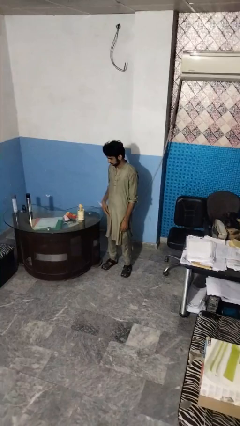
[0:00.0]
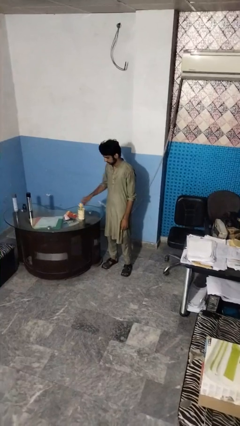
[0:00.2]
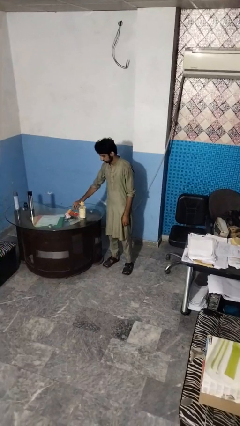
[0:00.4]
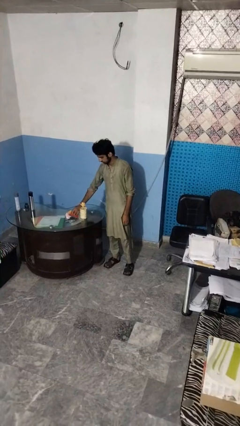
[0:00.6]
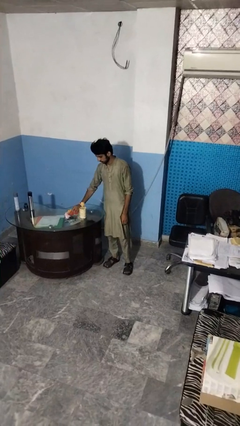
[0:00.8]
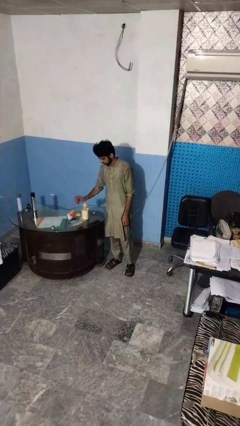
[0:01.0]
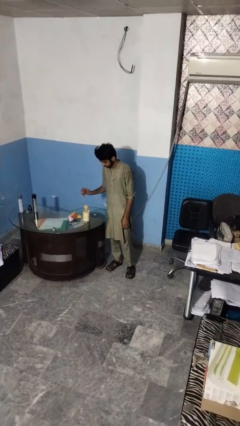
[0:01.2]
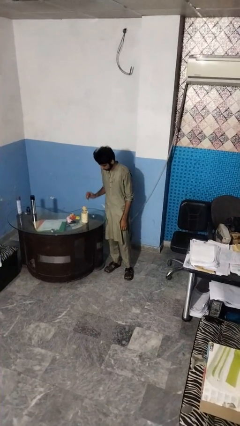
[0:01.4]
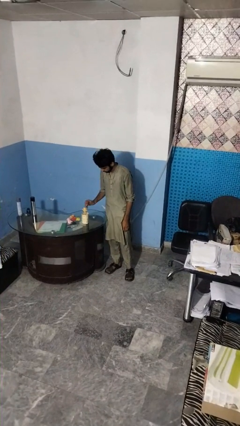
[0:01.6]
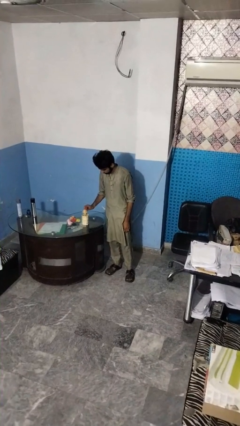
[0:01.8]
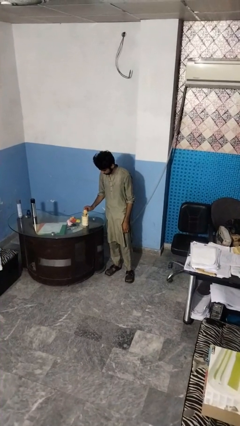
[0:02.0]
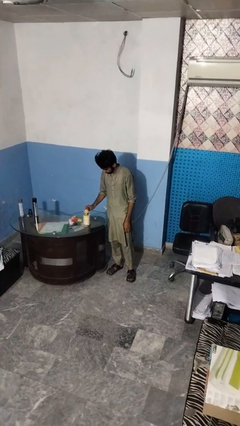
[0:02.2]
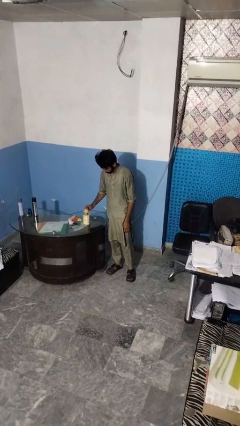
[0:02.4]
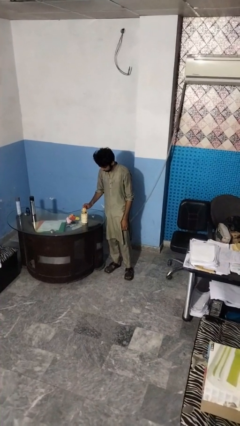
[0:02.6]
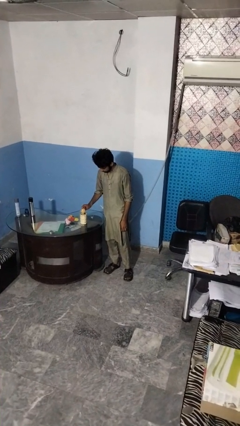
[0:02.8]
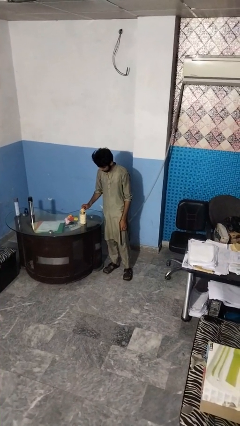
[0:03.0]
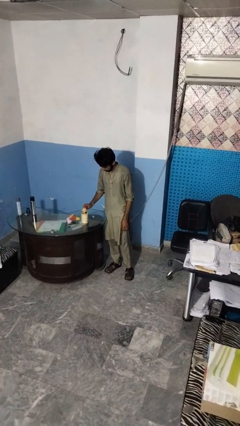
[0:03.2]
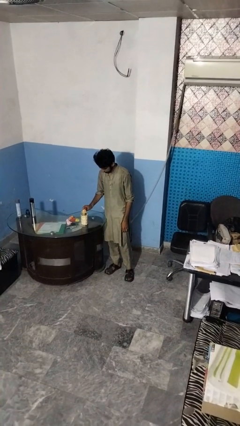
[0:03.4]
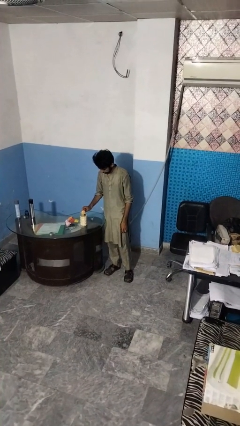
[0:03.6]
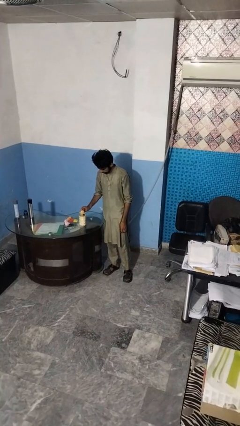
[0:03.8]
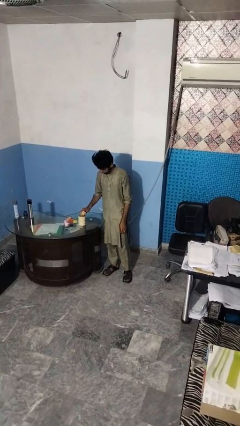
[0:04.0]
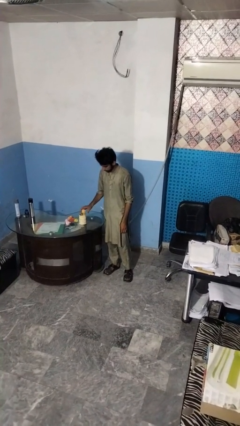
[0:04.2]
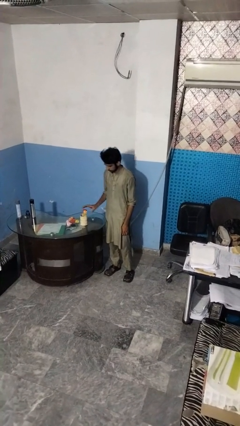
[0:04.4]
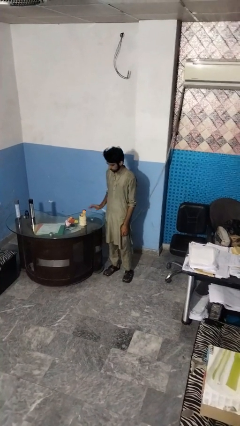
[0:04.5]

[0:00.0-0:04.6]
person arranges flowers in vase

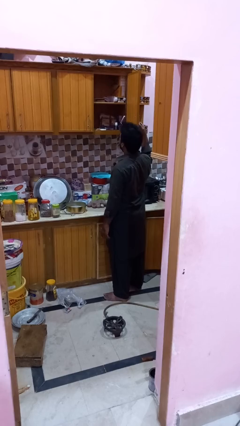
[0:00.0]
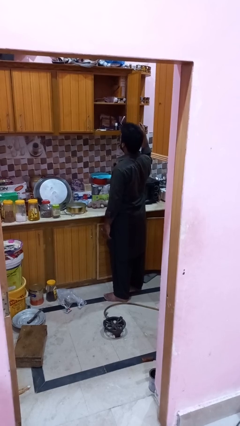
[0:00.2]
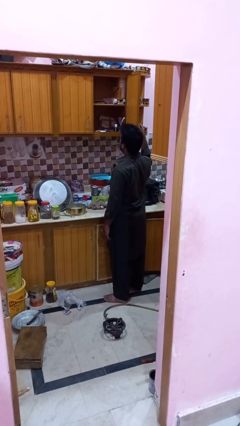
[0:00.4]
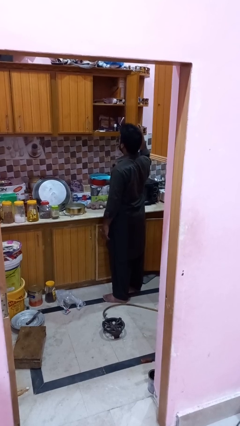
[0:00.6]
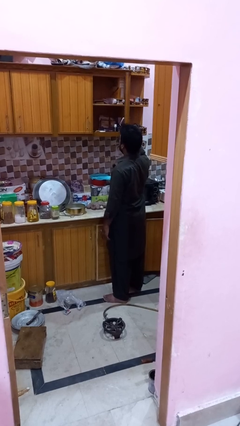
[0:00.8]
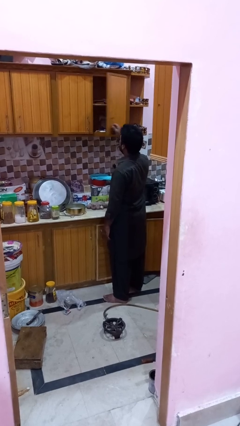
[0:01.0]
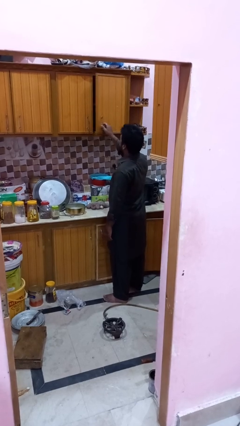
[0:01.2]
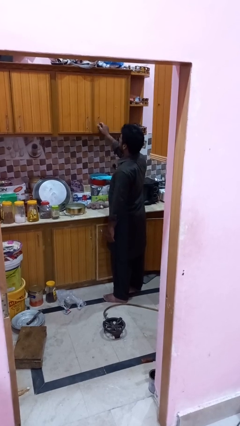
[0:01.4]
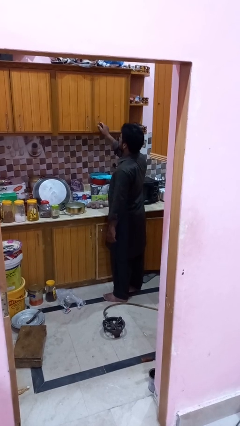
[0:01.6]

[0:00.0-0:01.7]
person closes cabinet

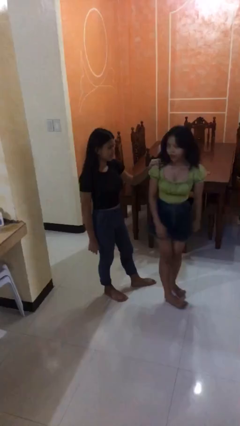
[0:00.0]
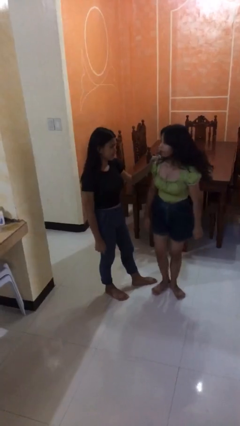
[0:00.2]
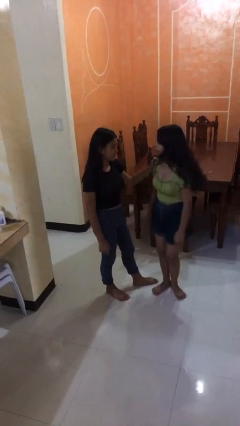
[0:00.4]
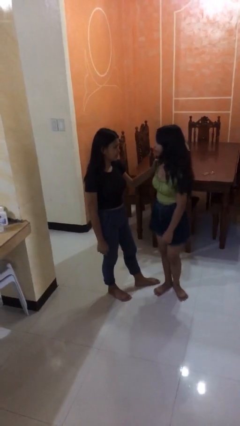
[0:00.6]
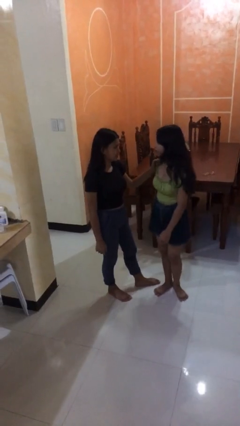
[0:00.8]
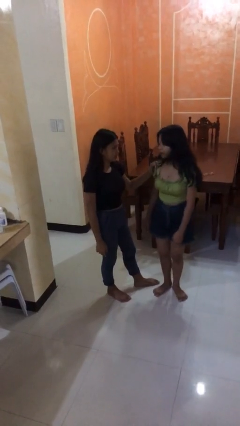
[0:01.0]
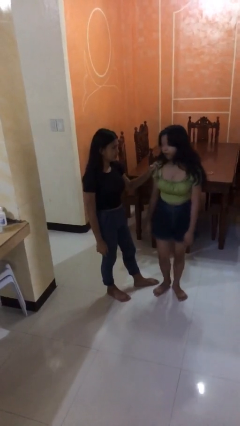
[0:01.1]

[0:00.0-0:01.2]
person spins person around

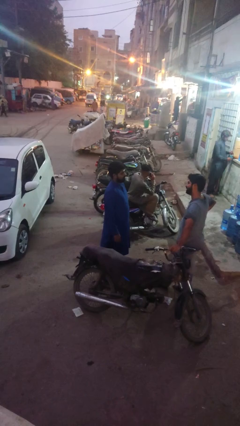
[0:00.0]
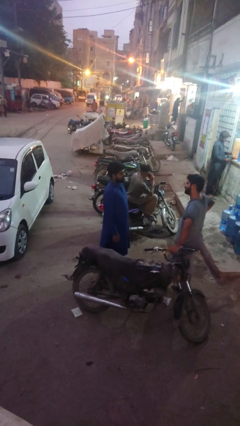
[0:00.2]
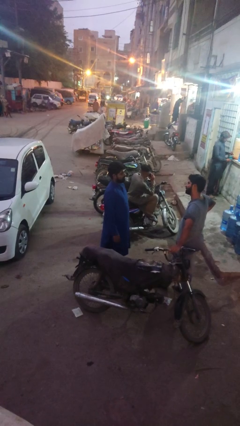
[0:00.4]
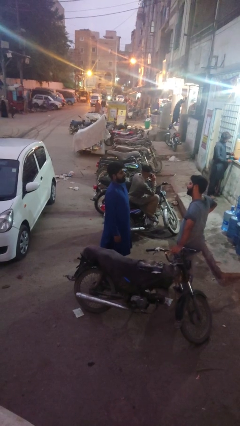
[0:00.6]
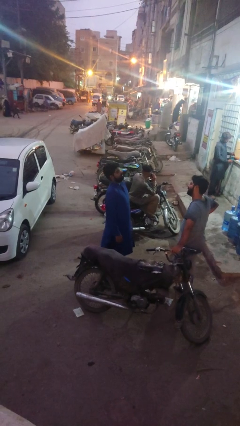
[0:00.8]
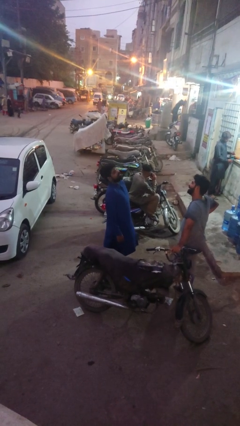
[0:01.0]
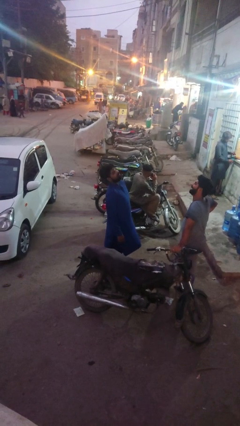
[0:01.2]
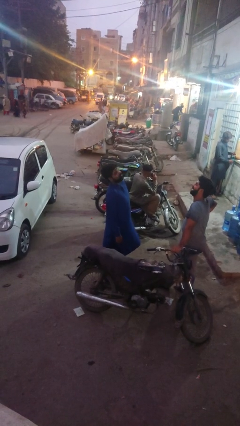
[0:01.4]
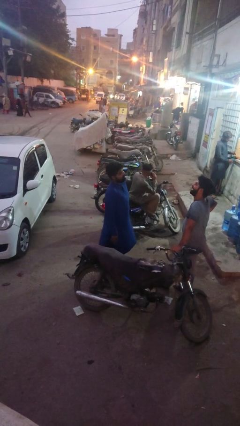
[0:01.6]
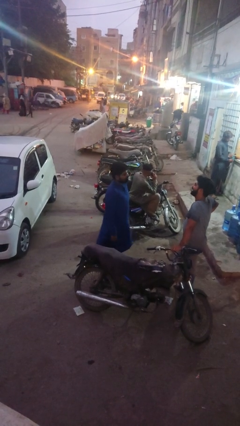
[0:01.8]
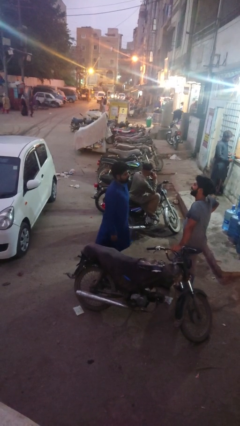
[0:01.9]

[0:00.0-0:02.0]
person laughs with person

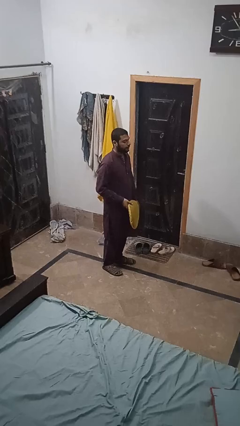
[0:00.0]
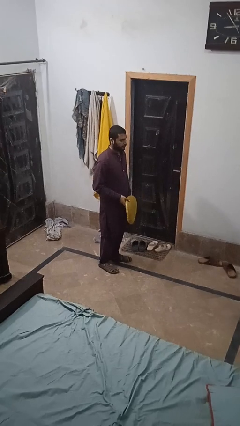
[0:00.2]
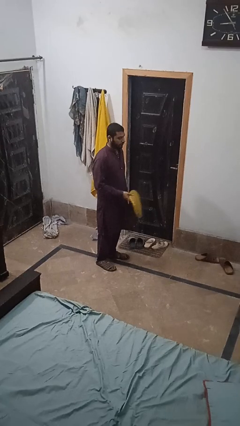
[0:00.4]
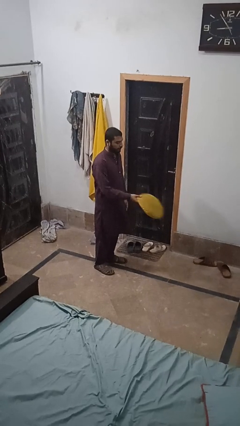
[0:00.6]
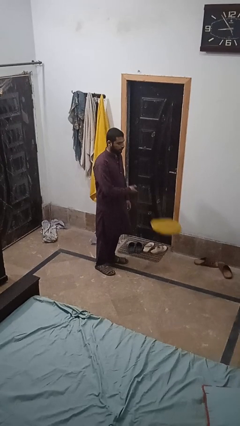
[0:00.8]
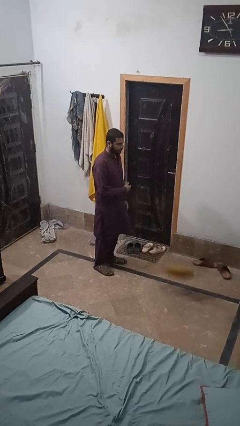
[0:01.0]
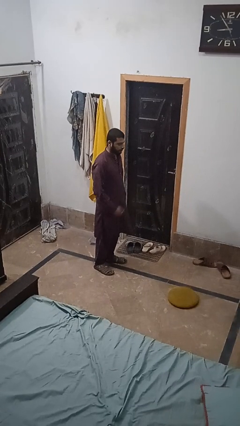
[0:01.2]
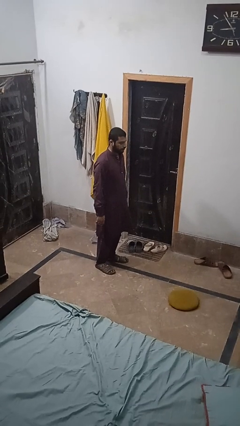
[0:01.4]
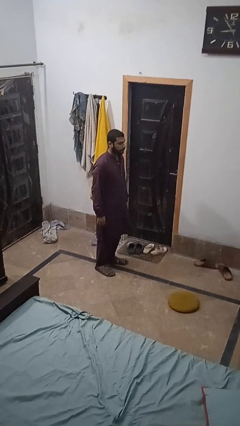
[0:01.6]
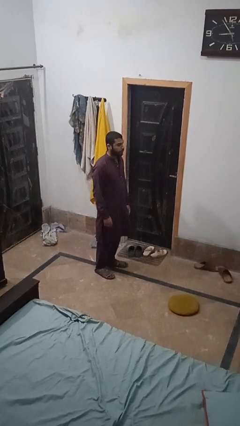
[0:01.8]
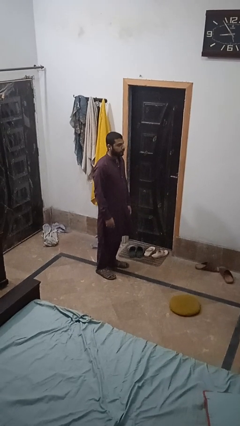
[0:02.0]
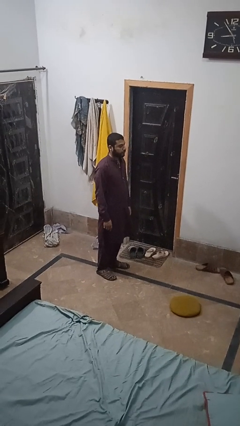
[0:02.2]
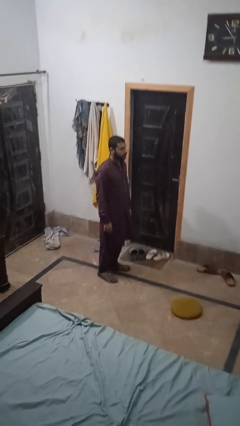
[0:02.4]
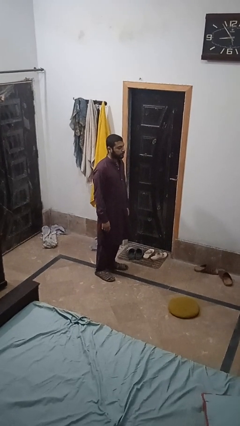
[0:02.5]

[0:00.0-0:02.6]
person throws object to ground

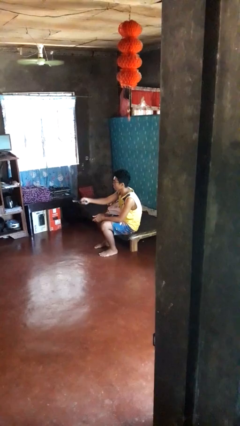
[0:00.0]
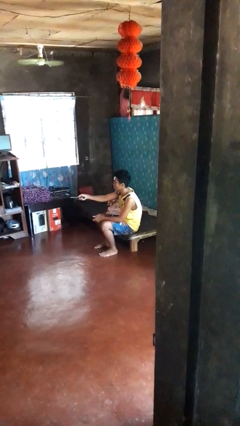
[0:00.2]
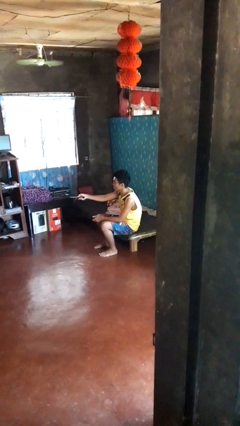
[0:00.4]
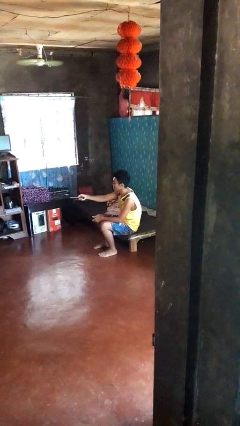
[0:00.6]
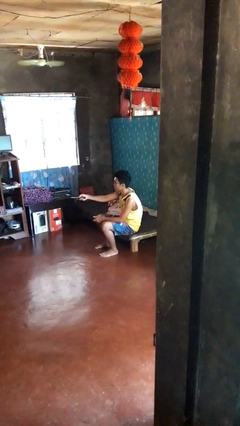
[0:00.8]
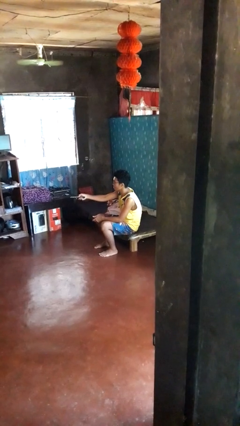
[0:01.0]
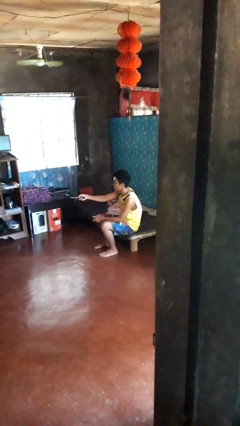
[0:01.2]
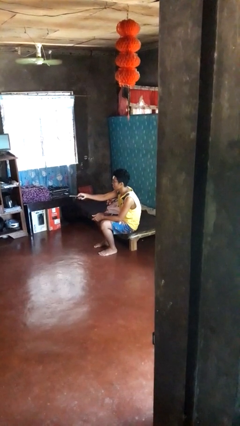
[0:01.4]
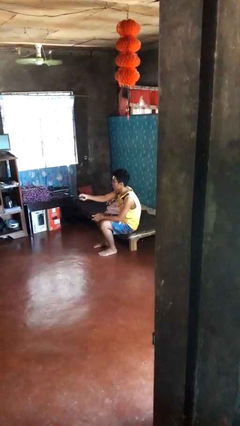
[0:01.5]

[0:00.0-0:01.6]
person uses television remote

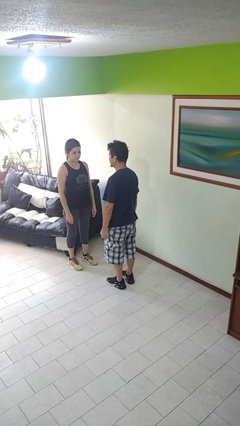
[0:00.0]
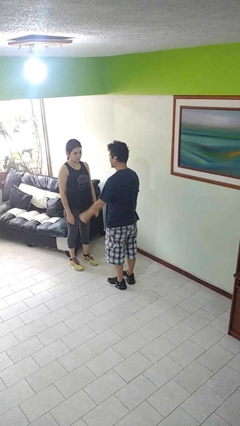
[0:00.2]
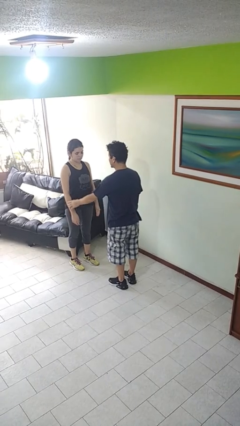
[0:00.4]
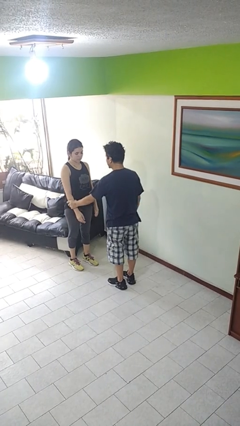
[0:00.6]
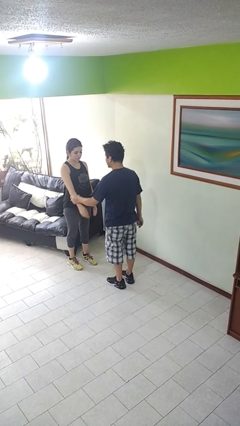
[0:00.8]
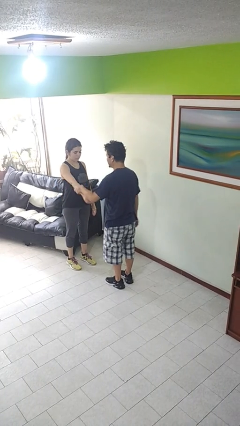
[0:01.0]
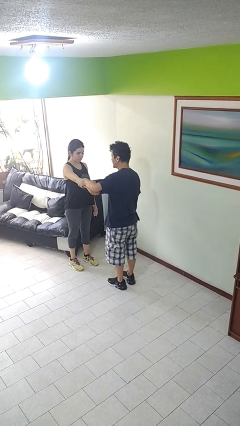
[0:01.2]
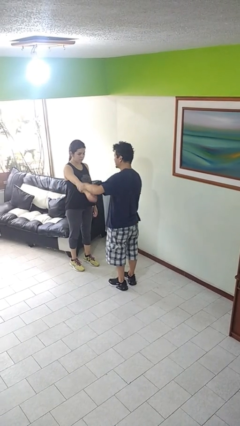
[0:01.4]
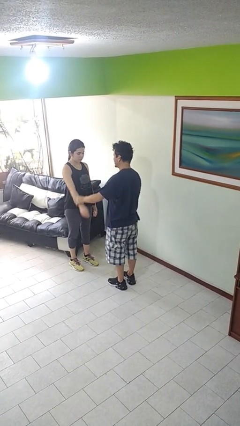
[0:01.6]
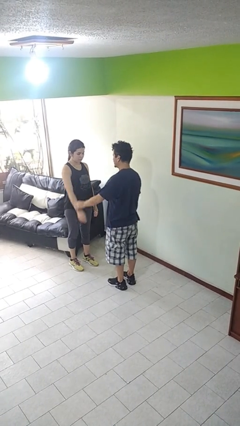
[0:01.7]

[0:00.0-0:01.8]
person grabs person by forearm

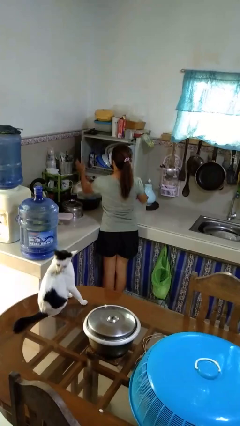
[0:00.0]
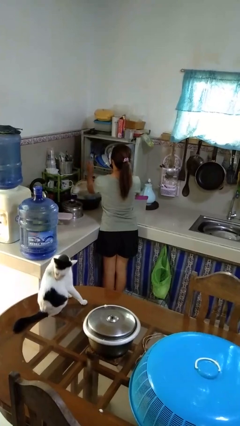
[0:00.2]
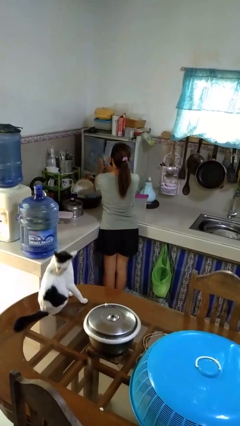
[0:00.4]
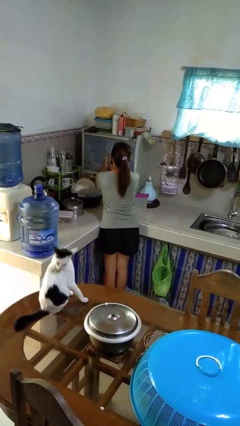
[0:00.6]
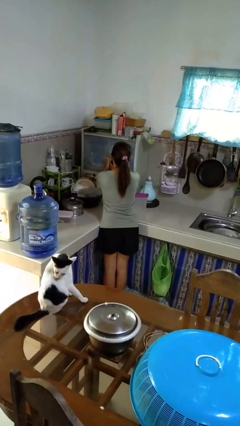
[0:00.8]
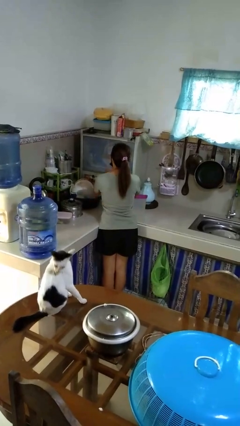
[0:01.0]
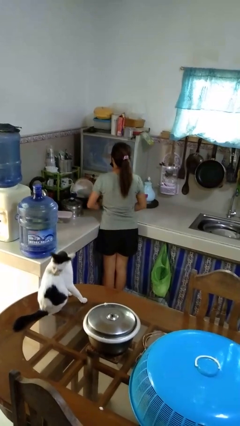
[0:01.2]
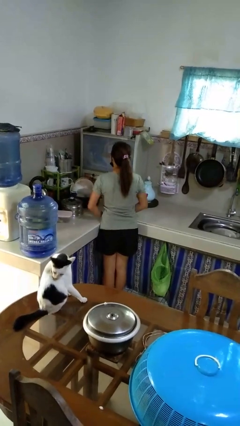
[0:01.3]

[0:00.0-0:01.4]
person closes kitchen drawer
